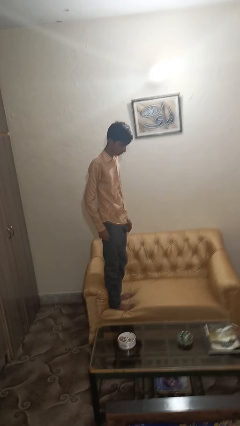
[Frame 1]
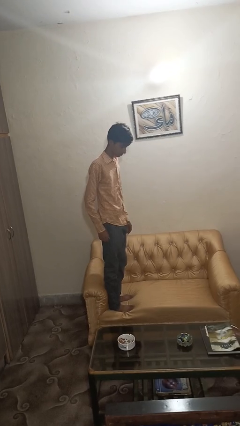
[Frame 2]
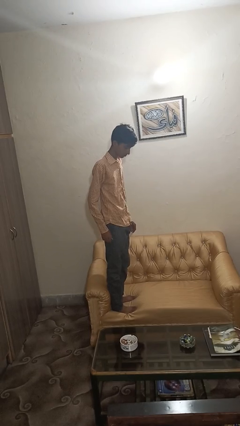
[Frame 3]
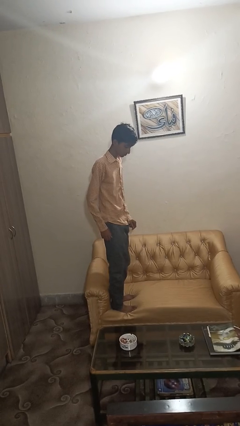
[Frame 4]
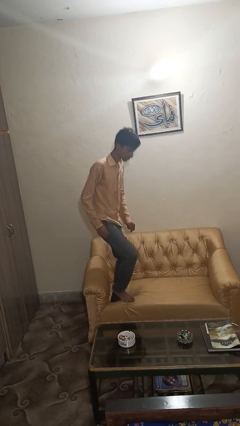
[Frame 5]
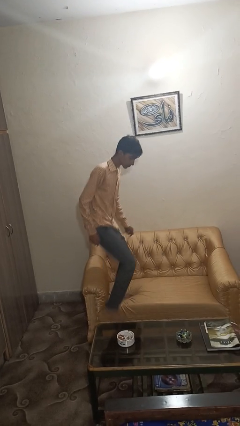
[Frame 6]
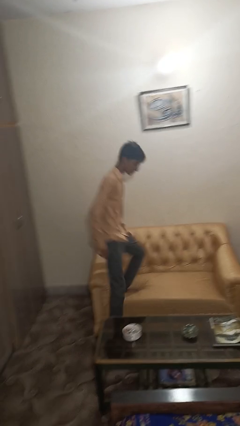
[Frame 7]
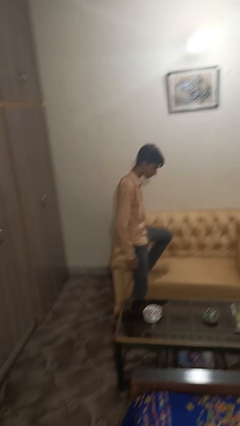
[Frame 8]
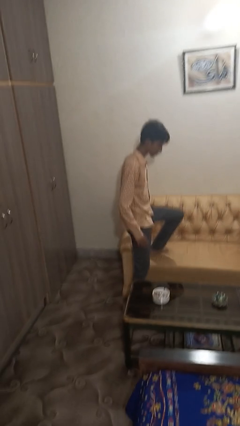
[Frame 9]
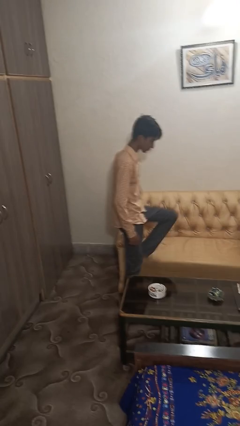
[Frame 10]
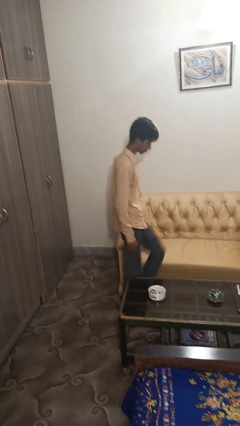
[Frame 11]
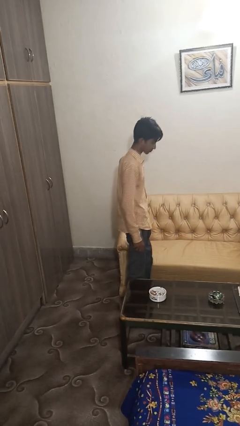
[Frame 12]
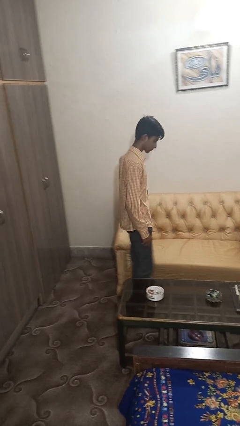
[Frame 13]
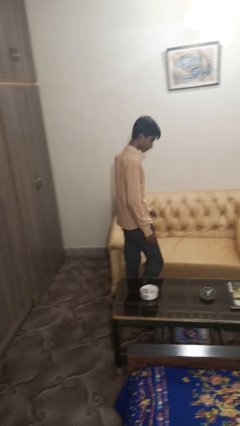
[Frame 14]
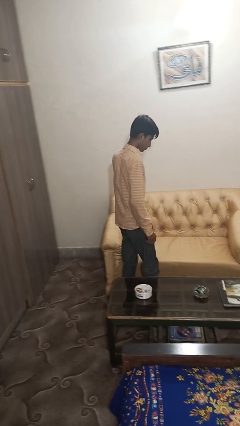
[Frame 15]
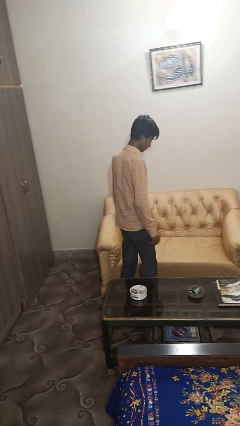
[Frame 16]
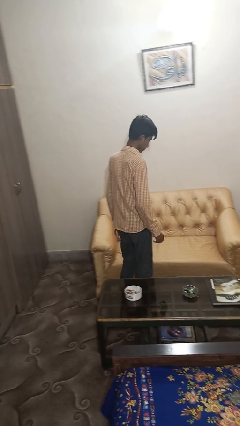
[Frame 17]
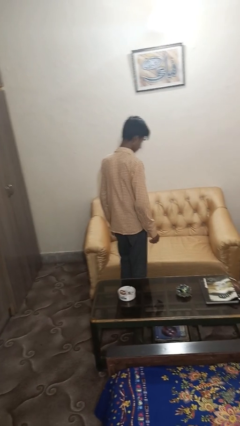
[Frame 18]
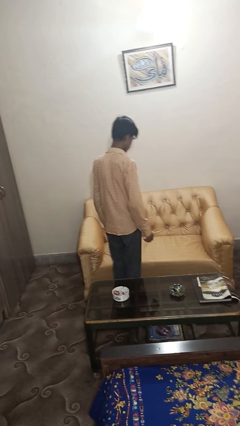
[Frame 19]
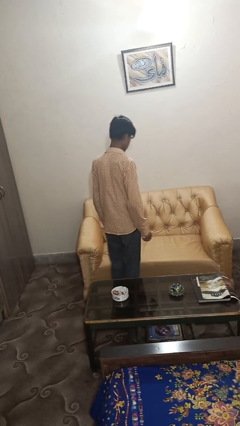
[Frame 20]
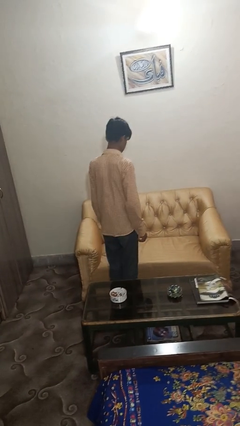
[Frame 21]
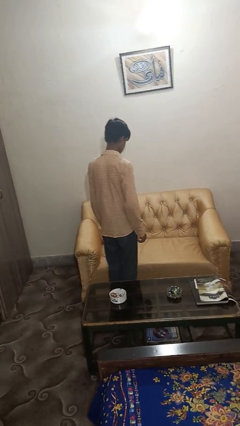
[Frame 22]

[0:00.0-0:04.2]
person climbs off couch

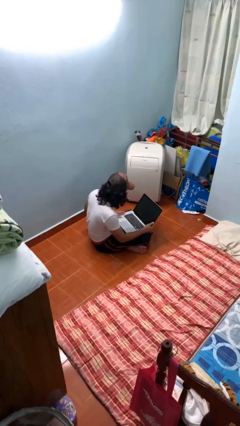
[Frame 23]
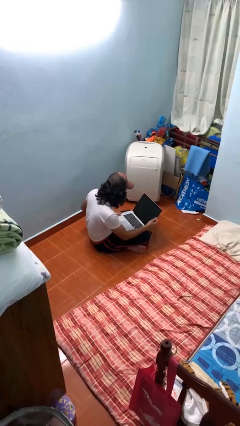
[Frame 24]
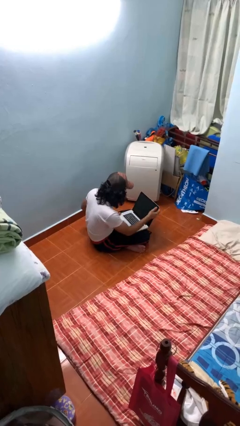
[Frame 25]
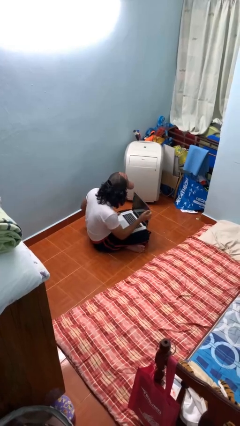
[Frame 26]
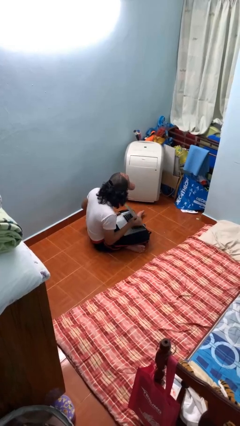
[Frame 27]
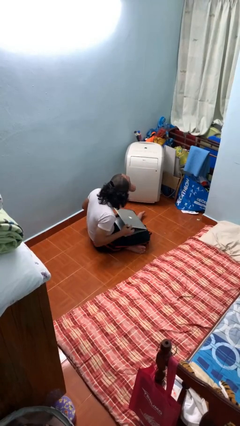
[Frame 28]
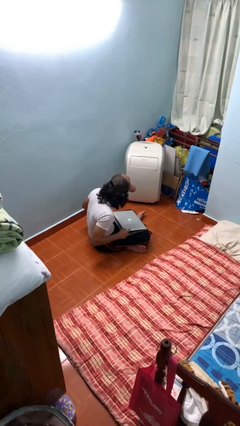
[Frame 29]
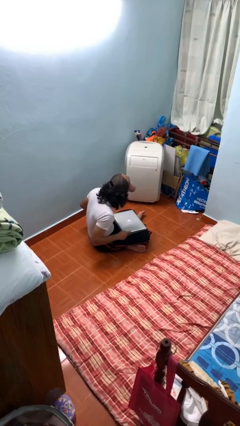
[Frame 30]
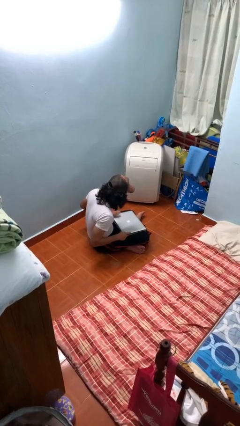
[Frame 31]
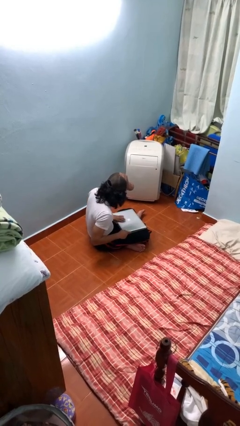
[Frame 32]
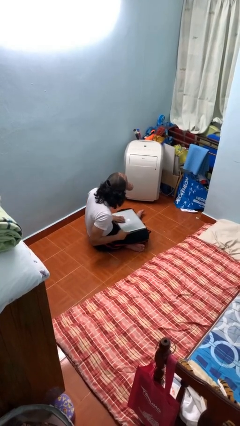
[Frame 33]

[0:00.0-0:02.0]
person closes laptop

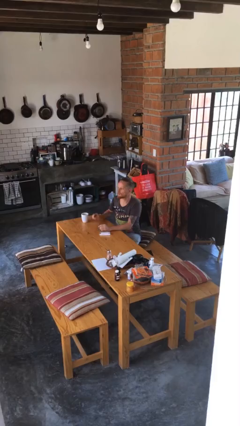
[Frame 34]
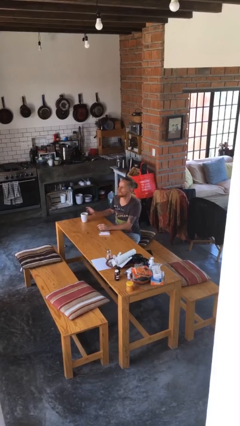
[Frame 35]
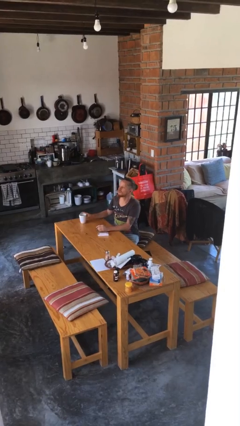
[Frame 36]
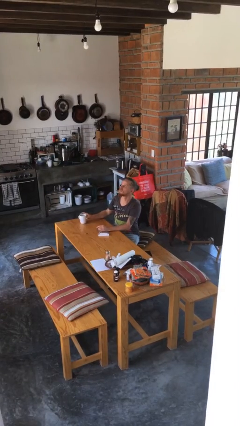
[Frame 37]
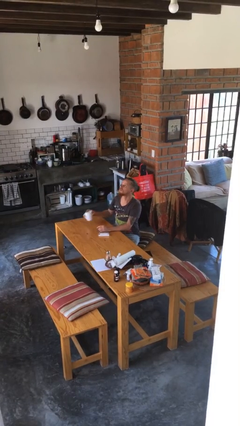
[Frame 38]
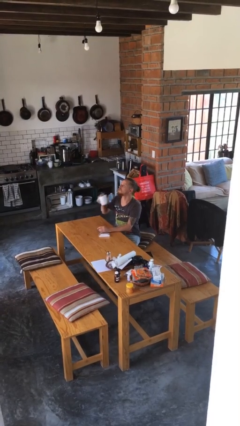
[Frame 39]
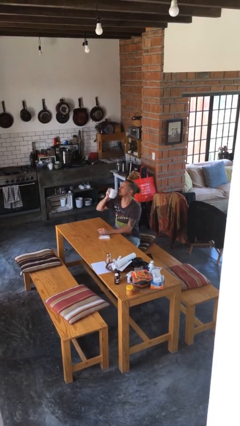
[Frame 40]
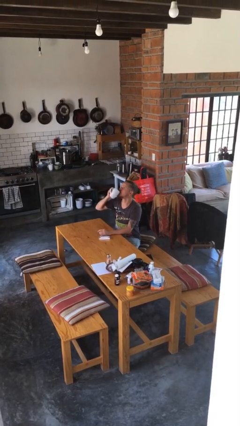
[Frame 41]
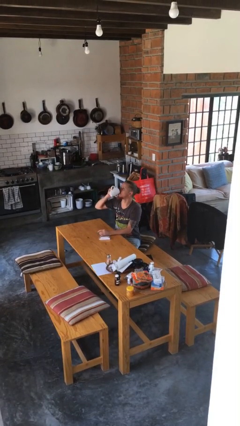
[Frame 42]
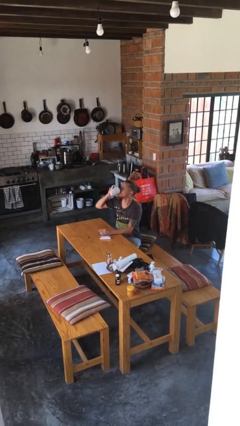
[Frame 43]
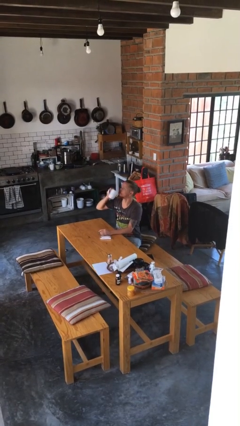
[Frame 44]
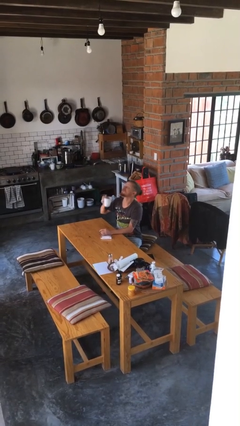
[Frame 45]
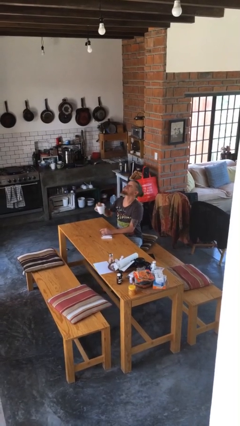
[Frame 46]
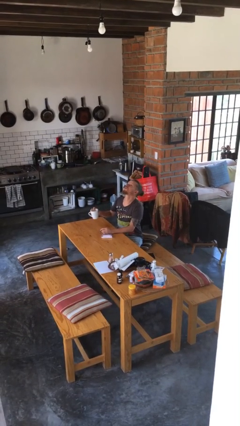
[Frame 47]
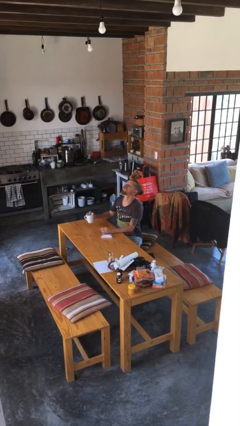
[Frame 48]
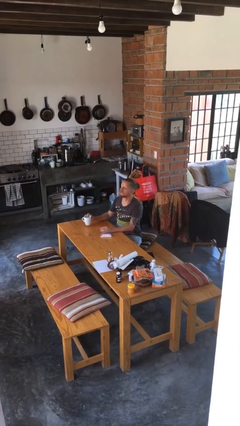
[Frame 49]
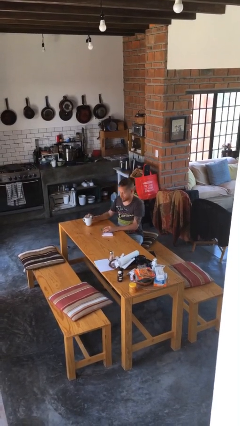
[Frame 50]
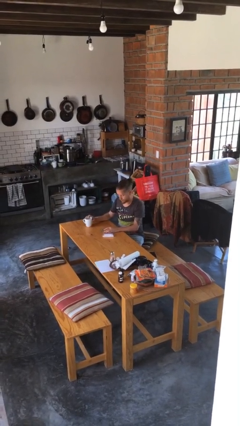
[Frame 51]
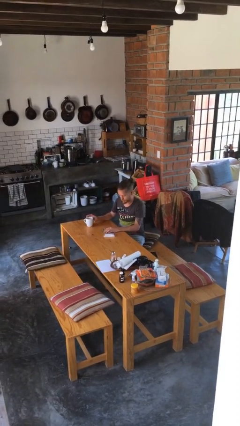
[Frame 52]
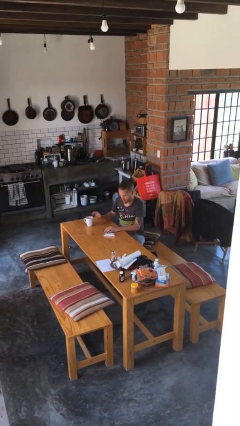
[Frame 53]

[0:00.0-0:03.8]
person drinks from cup

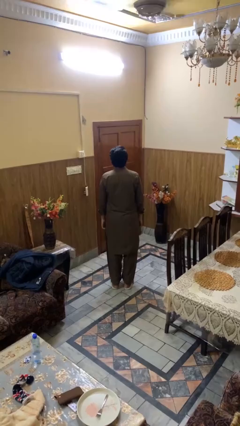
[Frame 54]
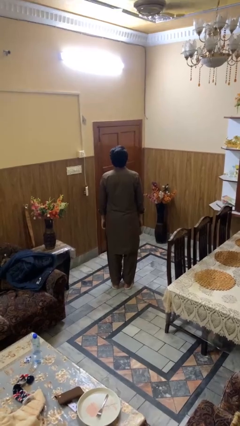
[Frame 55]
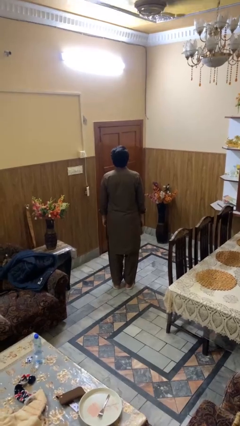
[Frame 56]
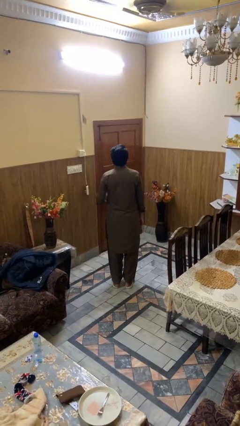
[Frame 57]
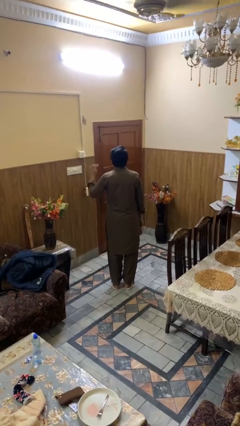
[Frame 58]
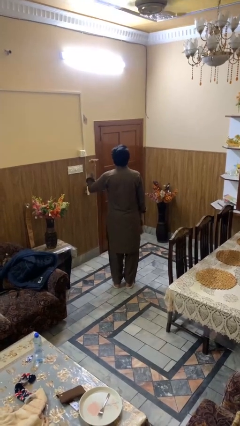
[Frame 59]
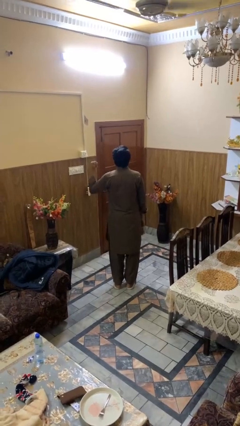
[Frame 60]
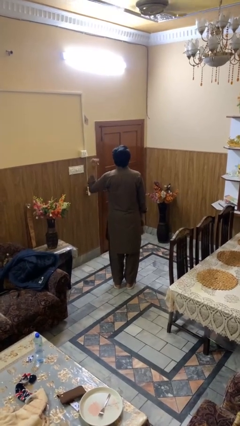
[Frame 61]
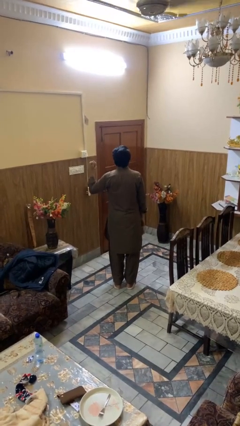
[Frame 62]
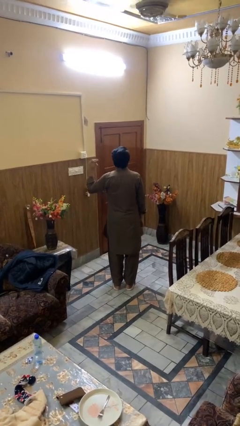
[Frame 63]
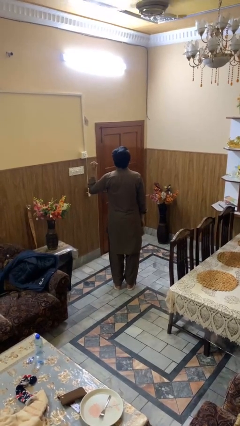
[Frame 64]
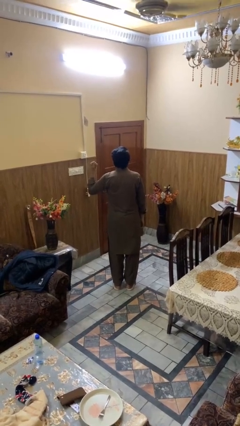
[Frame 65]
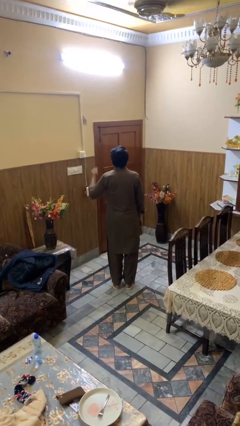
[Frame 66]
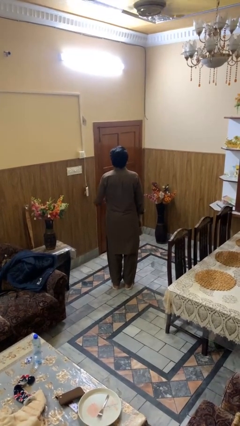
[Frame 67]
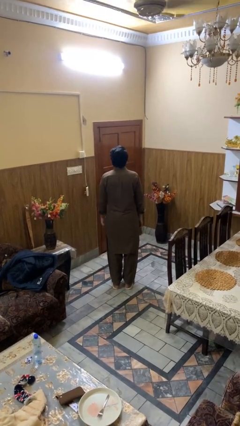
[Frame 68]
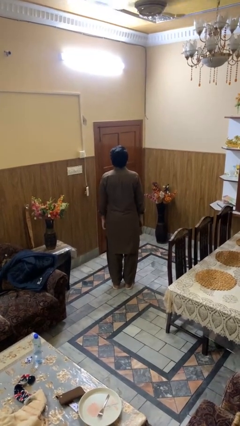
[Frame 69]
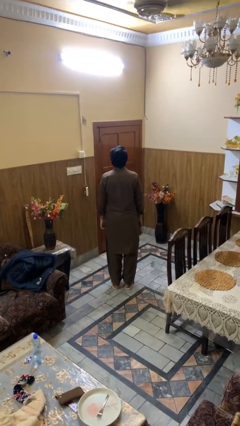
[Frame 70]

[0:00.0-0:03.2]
person snaps fingers

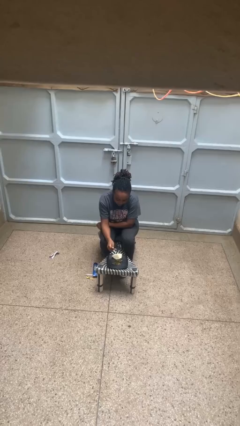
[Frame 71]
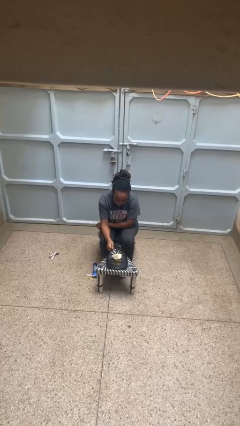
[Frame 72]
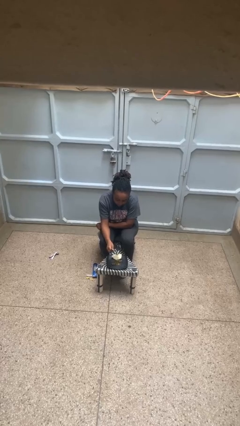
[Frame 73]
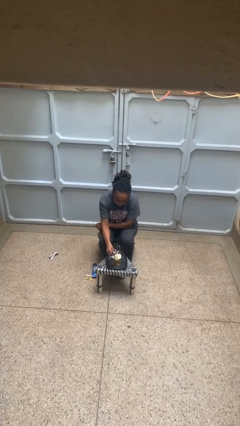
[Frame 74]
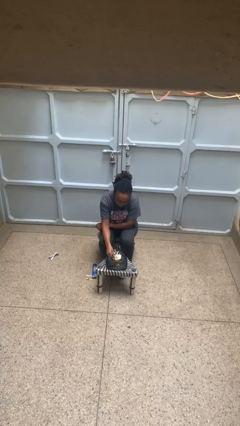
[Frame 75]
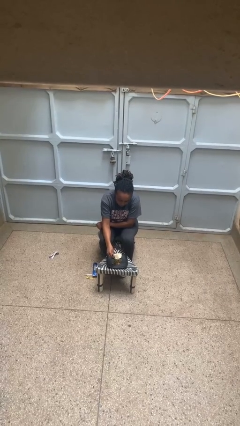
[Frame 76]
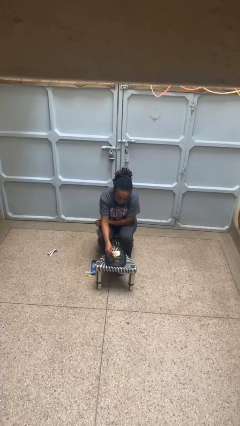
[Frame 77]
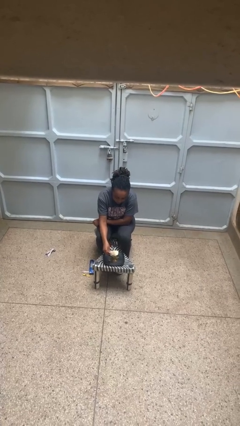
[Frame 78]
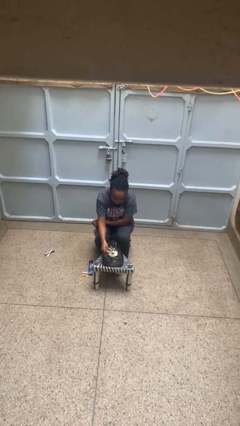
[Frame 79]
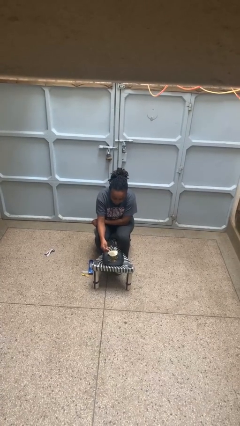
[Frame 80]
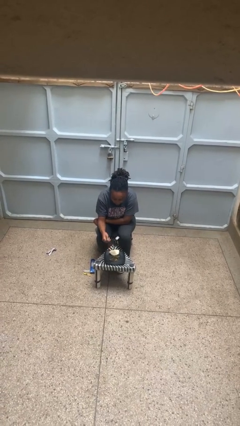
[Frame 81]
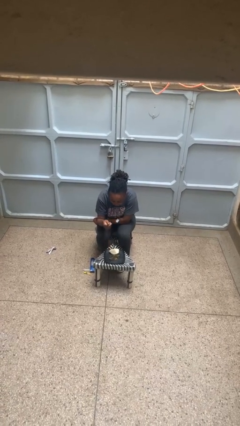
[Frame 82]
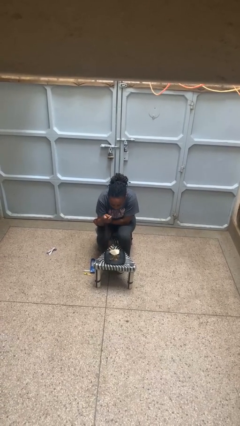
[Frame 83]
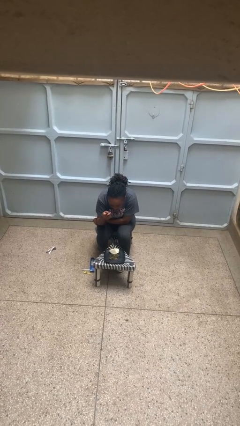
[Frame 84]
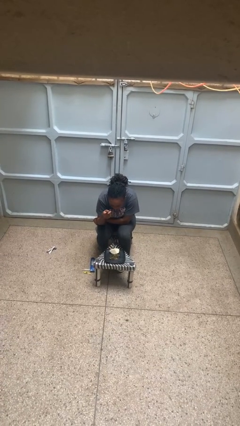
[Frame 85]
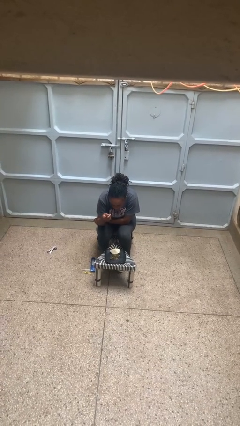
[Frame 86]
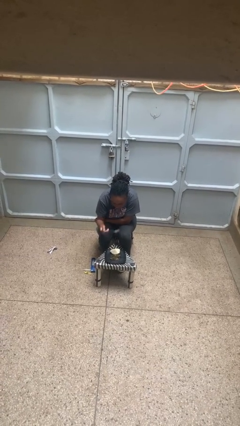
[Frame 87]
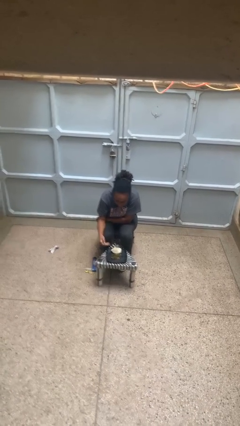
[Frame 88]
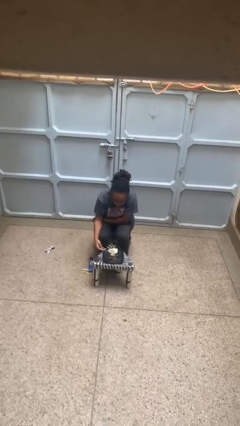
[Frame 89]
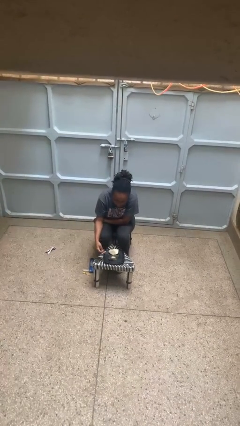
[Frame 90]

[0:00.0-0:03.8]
person eats with utensil
